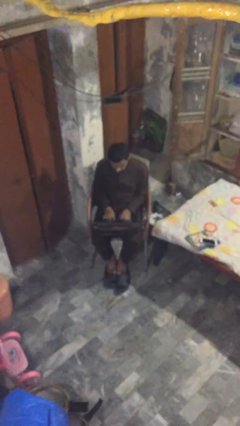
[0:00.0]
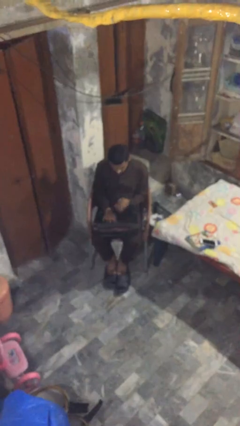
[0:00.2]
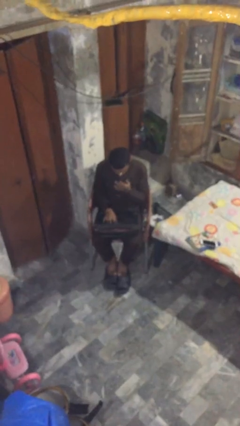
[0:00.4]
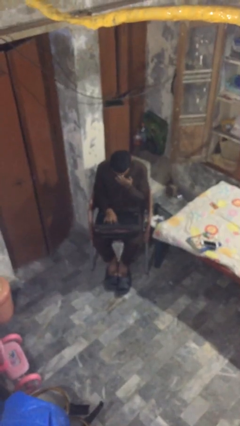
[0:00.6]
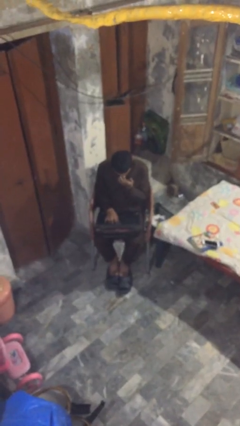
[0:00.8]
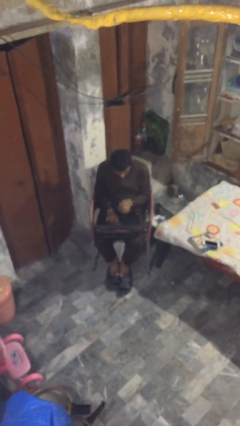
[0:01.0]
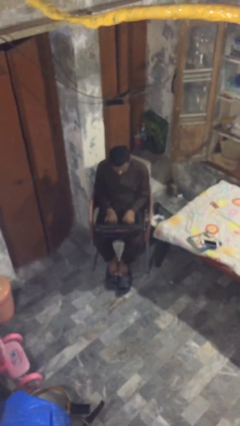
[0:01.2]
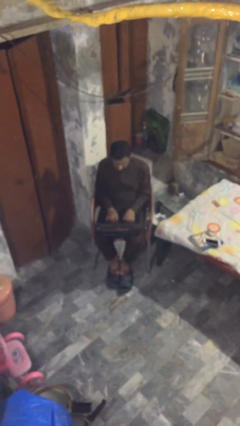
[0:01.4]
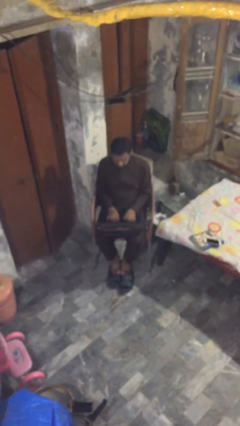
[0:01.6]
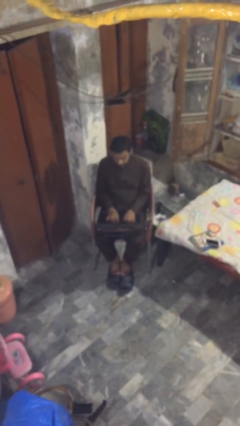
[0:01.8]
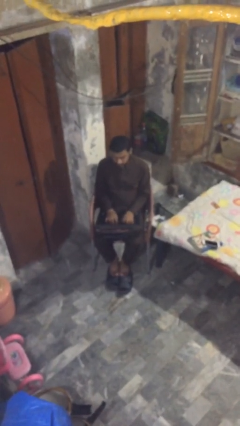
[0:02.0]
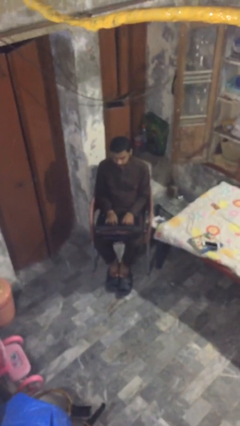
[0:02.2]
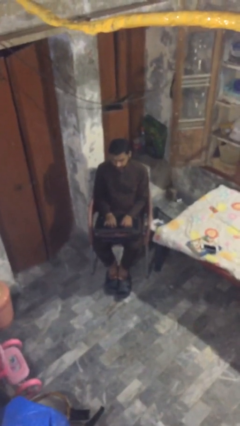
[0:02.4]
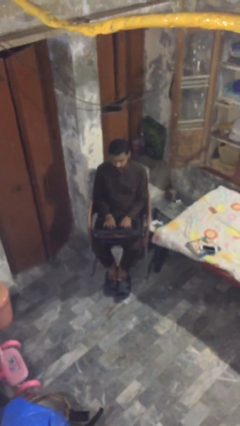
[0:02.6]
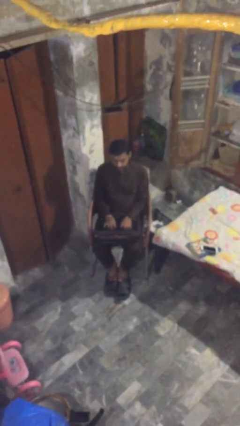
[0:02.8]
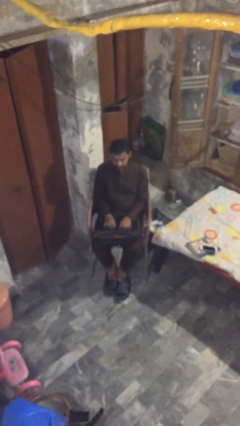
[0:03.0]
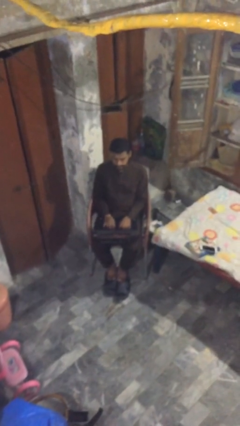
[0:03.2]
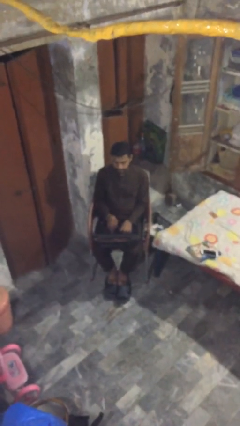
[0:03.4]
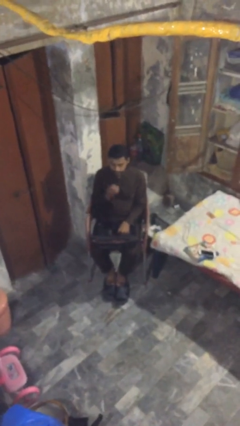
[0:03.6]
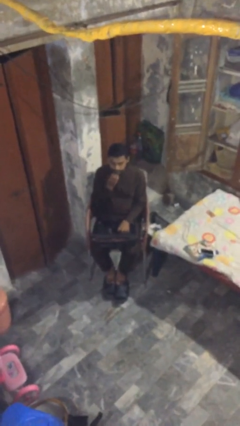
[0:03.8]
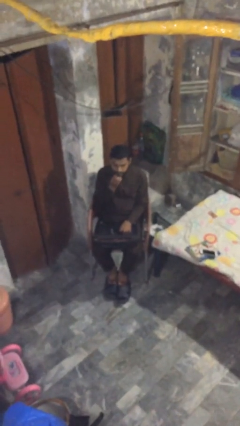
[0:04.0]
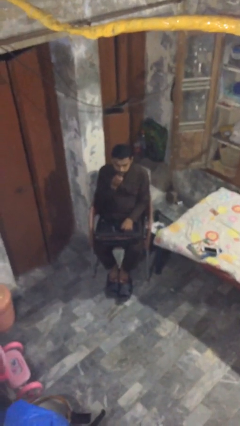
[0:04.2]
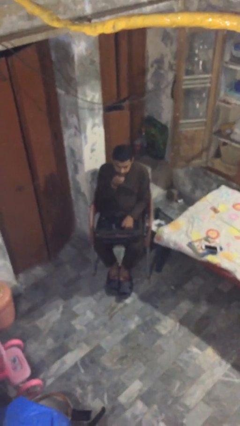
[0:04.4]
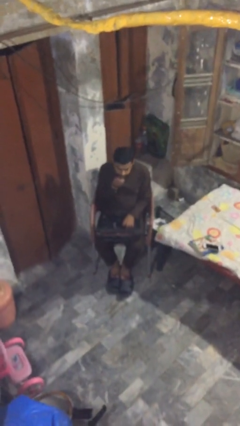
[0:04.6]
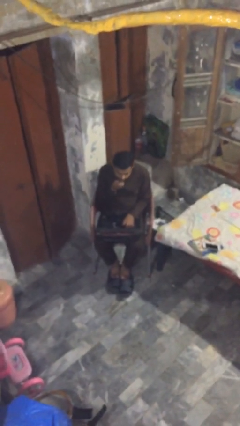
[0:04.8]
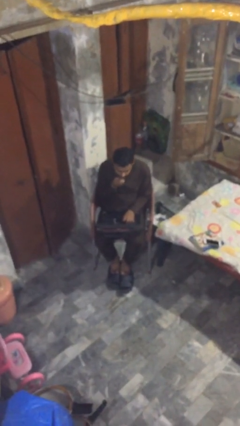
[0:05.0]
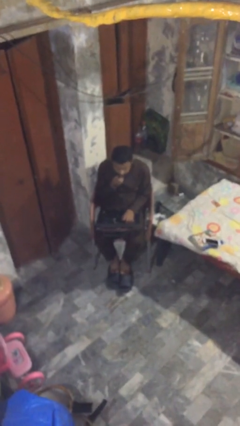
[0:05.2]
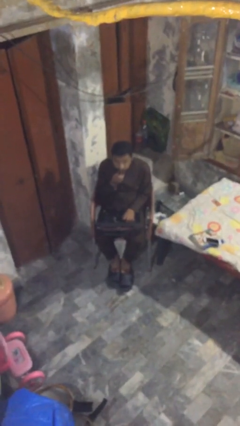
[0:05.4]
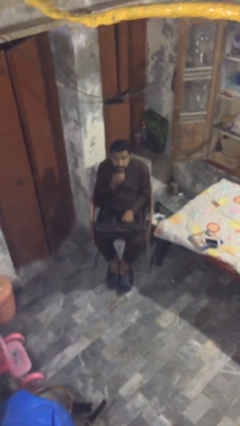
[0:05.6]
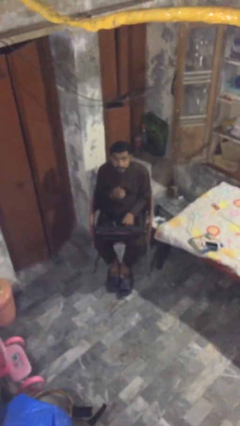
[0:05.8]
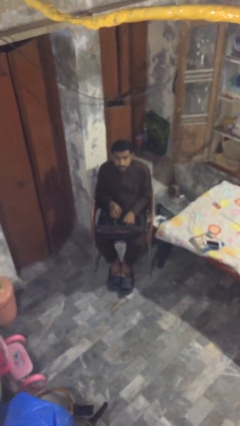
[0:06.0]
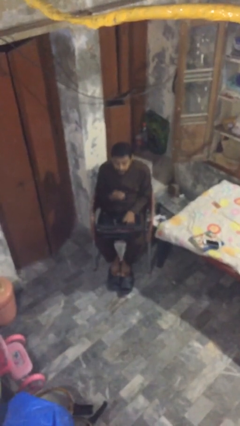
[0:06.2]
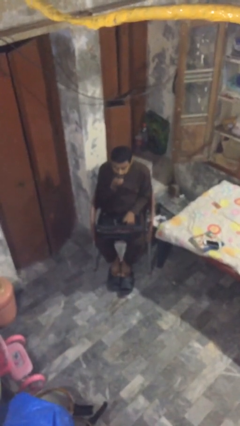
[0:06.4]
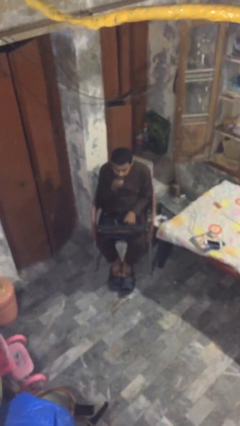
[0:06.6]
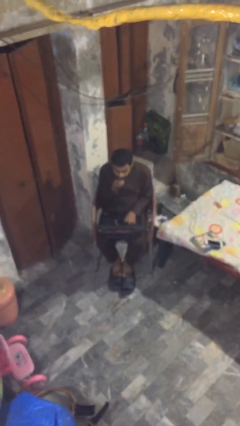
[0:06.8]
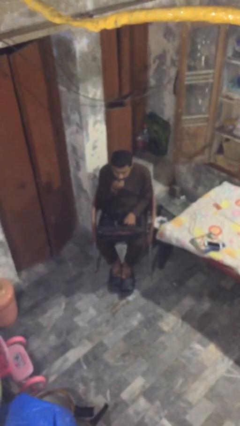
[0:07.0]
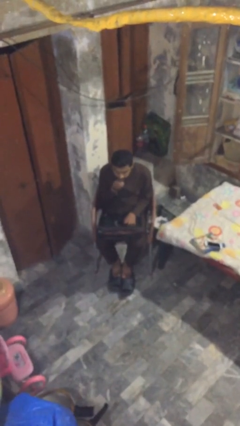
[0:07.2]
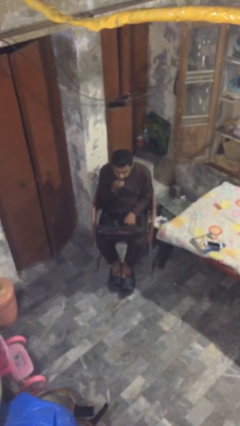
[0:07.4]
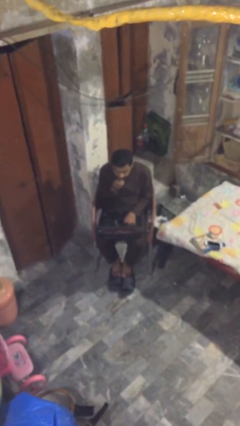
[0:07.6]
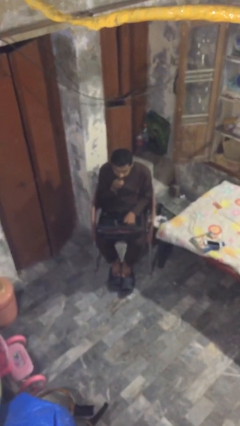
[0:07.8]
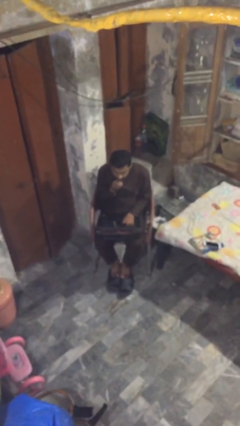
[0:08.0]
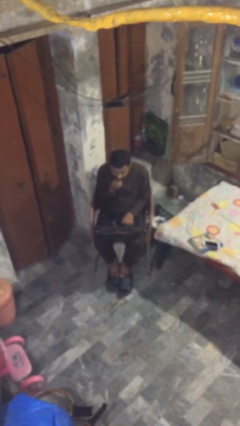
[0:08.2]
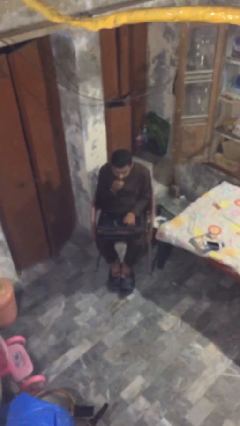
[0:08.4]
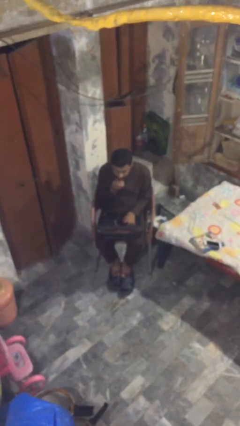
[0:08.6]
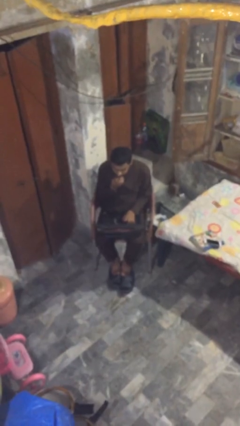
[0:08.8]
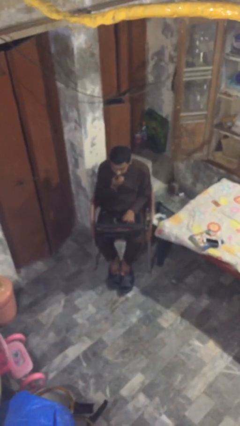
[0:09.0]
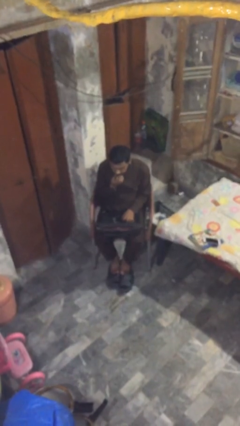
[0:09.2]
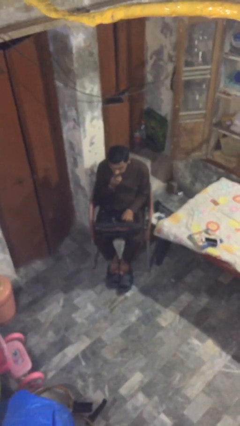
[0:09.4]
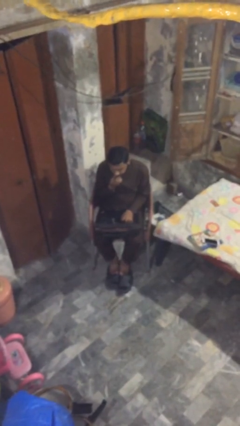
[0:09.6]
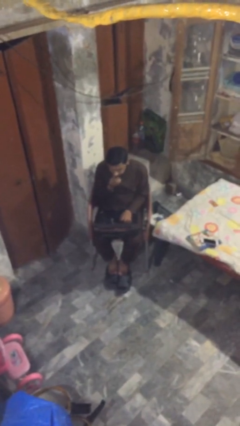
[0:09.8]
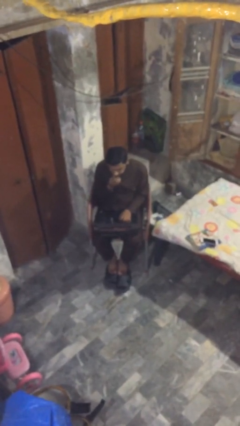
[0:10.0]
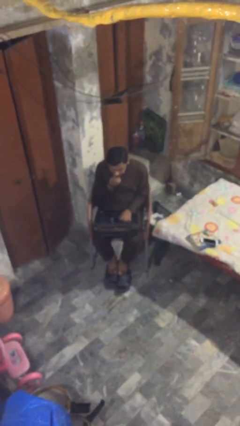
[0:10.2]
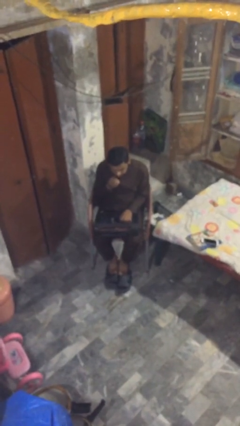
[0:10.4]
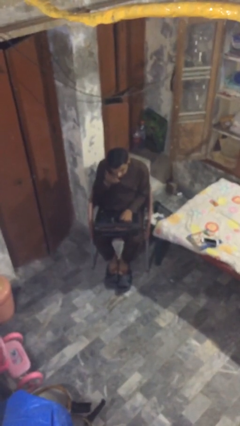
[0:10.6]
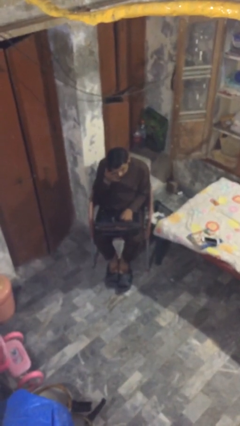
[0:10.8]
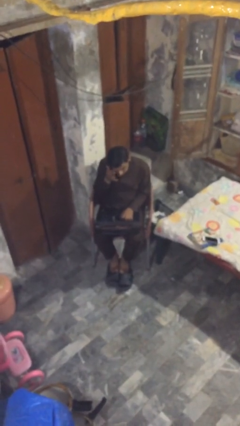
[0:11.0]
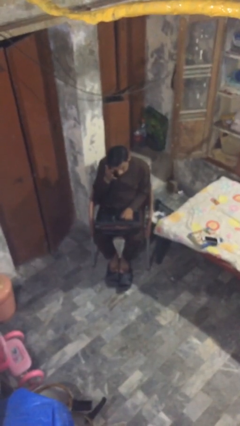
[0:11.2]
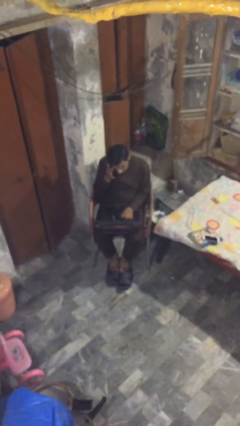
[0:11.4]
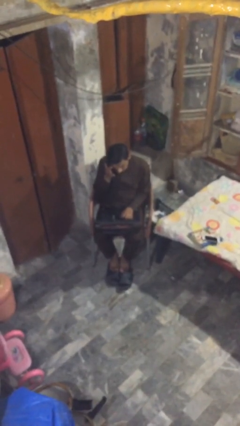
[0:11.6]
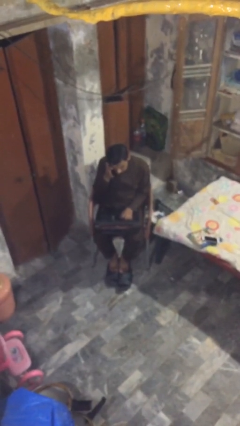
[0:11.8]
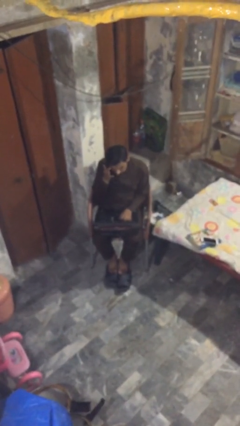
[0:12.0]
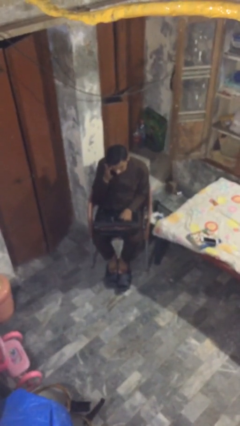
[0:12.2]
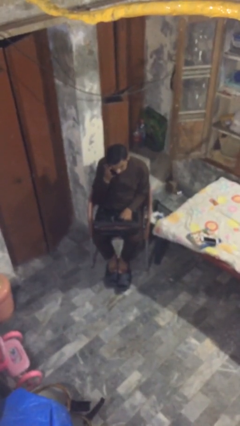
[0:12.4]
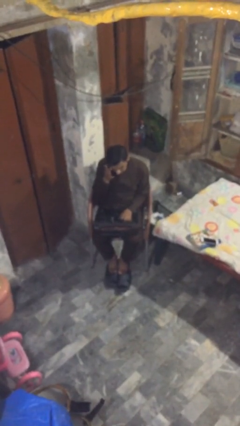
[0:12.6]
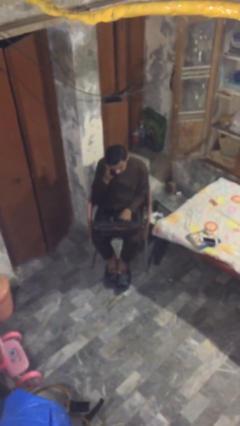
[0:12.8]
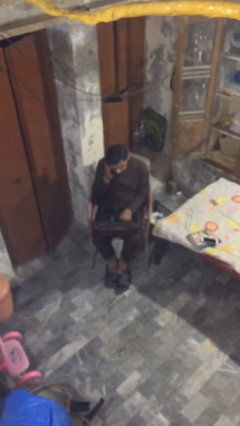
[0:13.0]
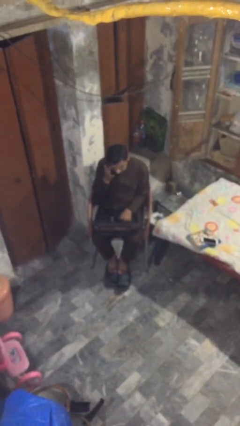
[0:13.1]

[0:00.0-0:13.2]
person interacts with laptop

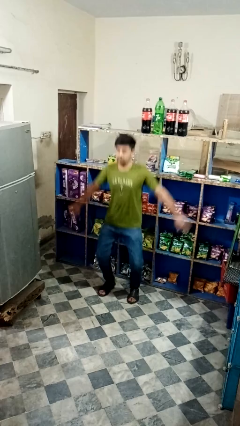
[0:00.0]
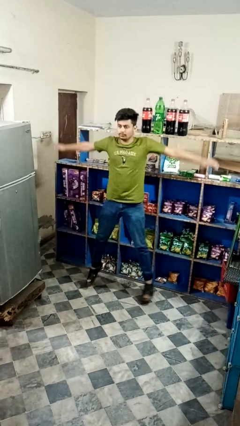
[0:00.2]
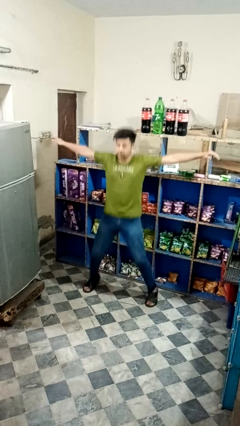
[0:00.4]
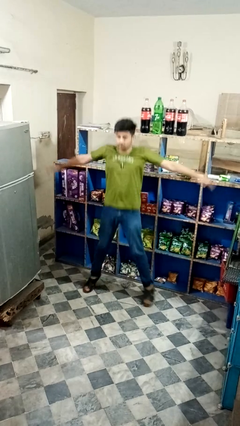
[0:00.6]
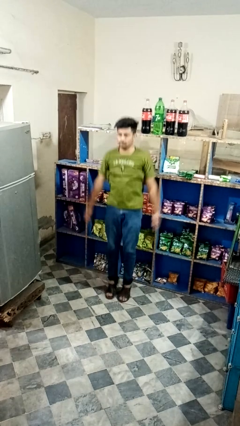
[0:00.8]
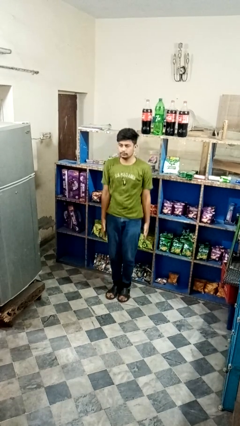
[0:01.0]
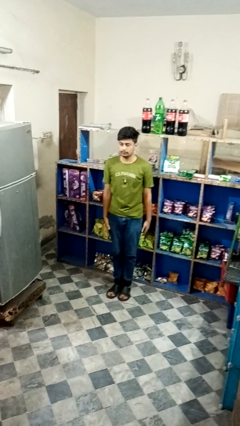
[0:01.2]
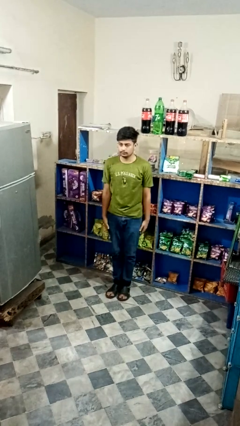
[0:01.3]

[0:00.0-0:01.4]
person exercises with jumping jacks

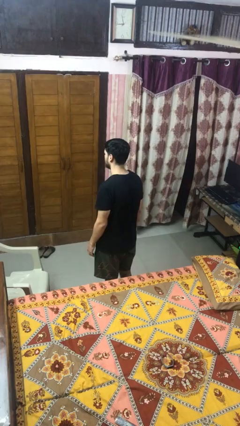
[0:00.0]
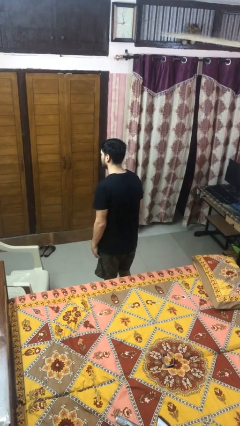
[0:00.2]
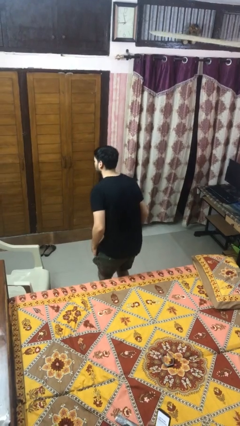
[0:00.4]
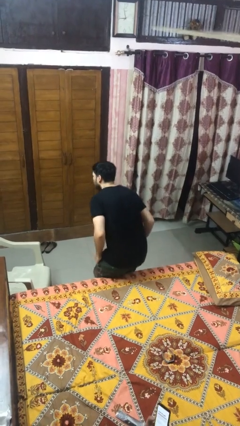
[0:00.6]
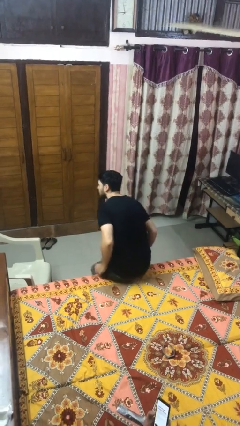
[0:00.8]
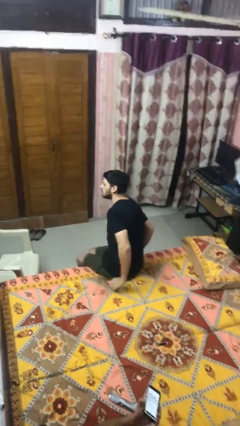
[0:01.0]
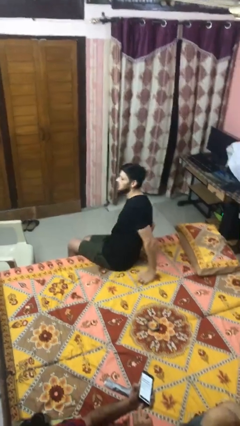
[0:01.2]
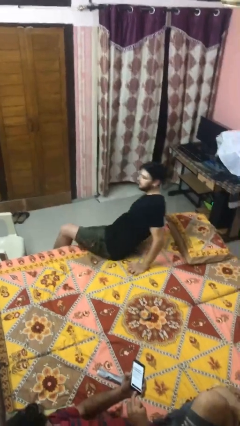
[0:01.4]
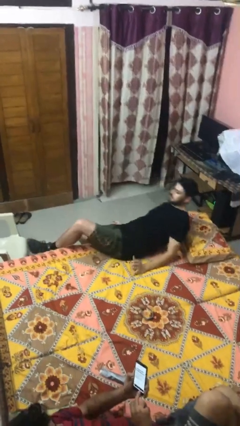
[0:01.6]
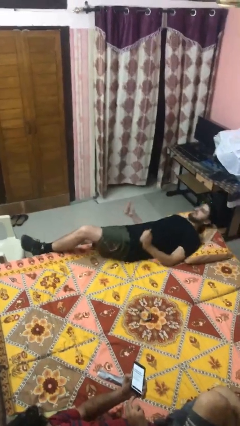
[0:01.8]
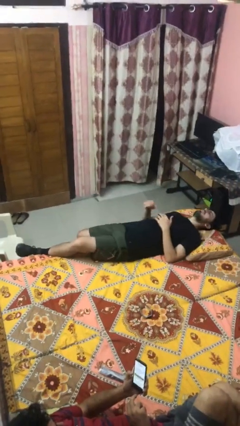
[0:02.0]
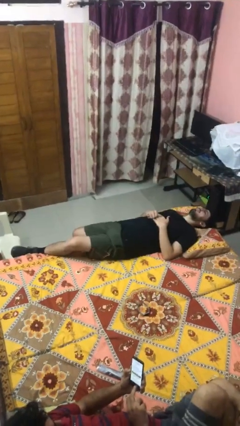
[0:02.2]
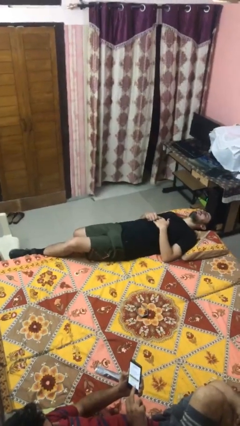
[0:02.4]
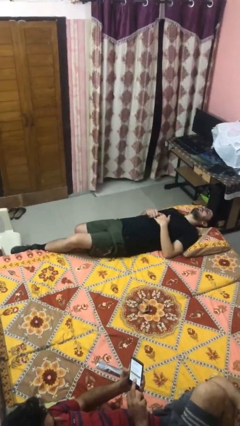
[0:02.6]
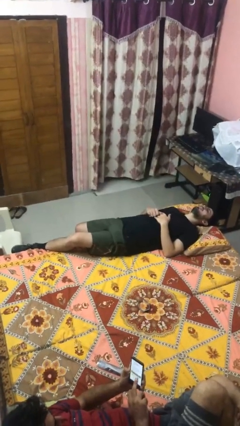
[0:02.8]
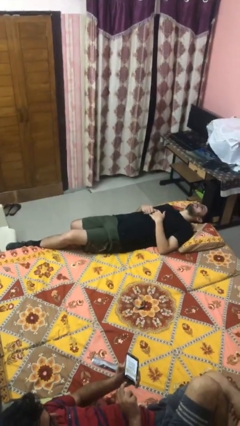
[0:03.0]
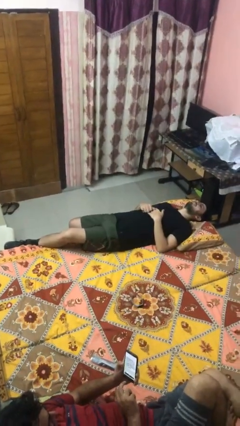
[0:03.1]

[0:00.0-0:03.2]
person lies down on bed
